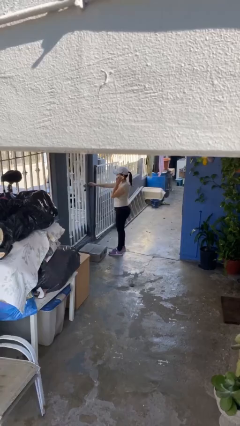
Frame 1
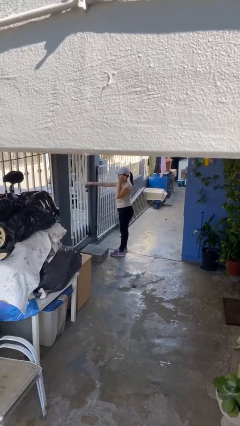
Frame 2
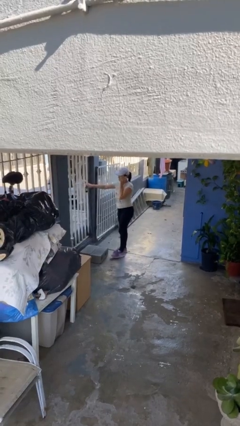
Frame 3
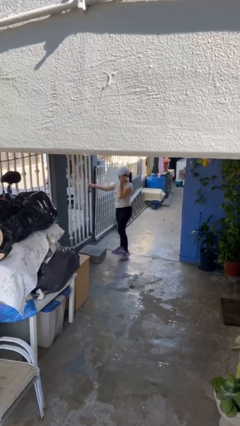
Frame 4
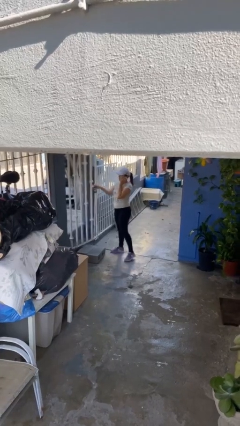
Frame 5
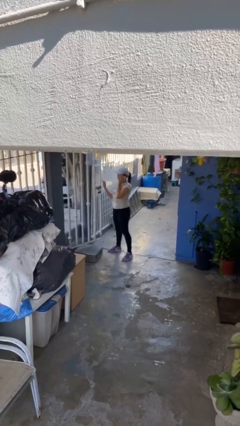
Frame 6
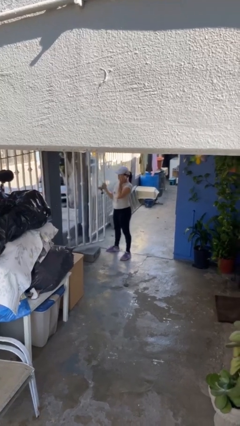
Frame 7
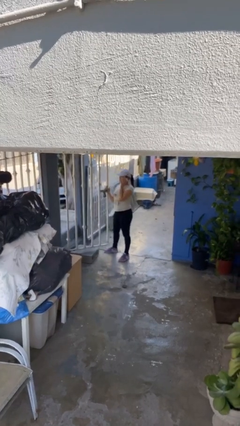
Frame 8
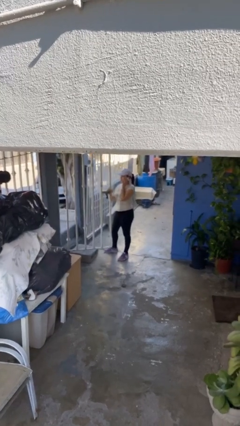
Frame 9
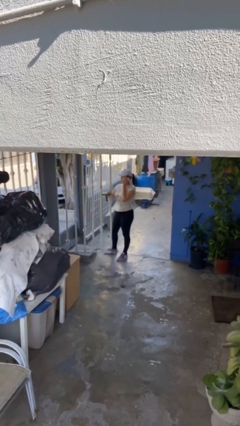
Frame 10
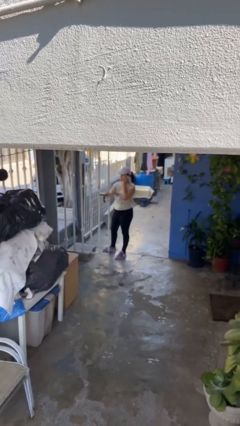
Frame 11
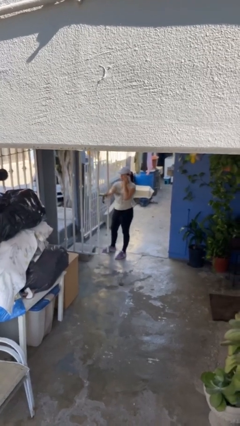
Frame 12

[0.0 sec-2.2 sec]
person opens facility door

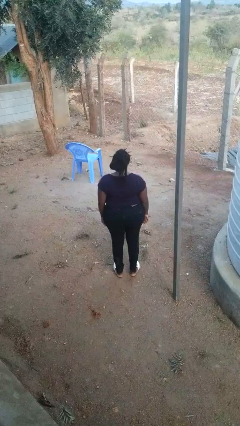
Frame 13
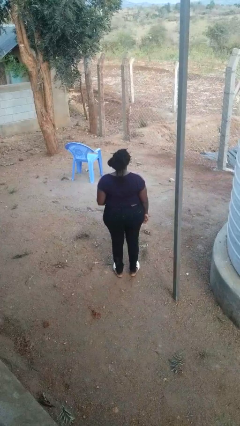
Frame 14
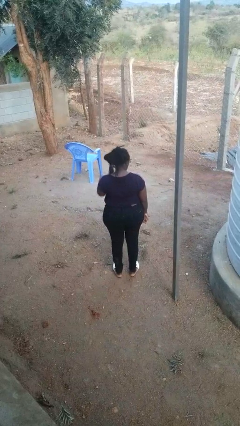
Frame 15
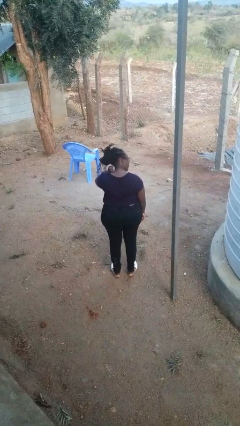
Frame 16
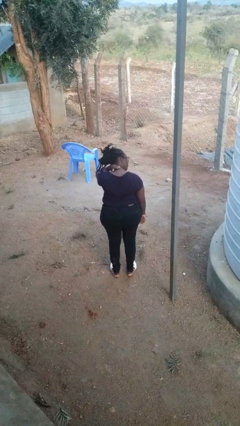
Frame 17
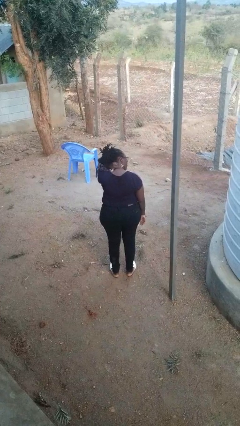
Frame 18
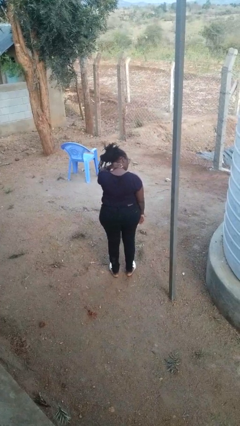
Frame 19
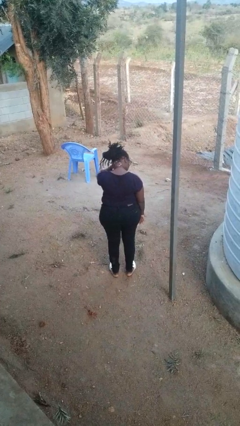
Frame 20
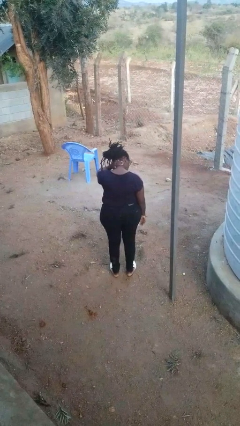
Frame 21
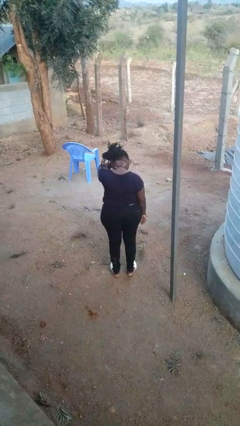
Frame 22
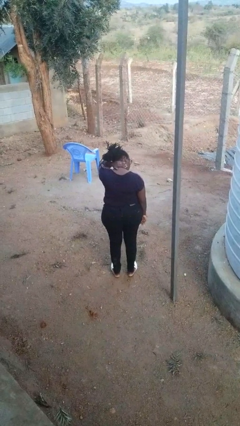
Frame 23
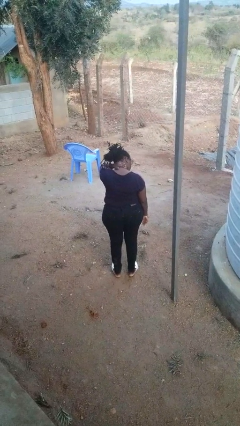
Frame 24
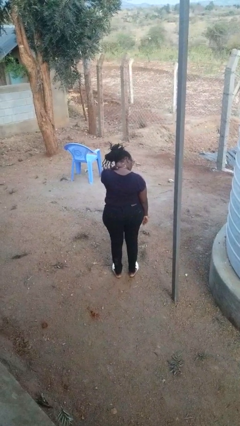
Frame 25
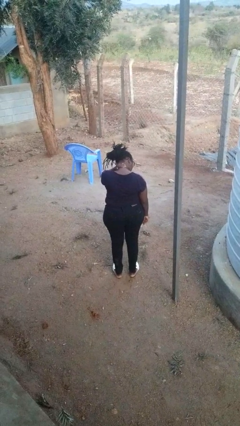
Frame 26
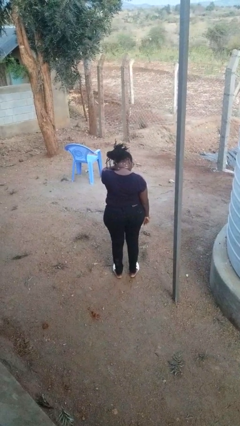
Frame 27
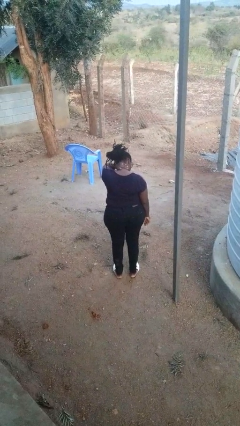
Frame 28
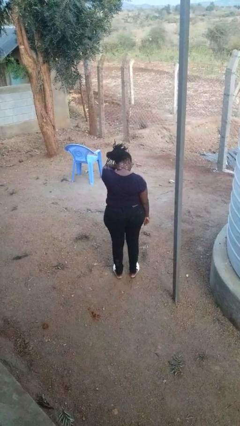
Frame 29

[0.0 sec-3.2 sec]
person rubs neck

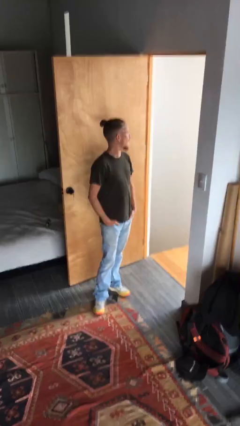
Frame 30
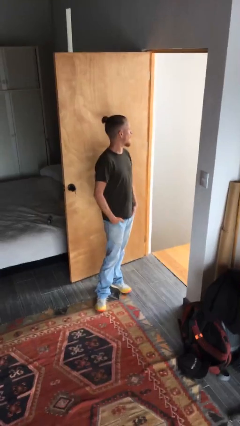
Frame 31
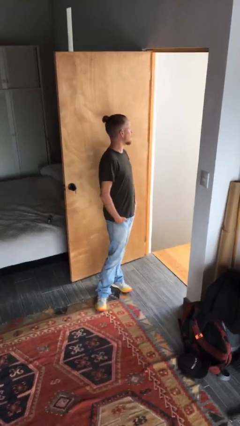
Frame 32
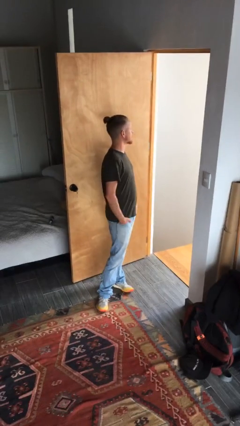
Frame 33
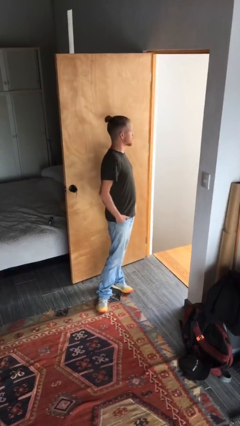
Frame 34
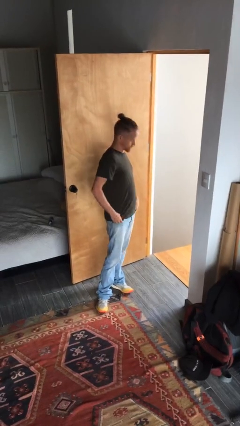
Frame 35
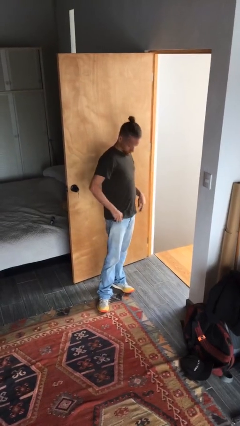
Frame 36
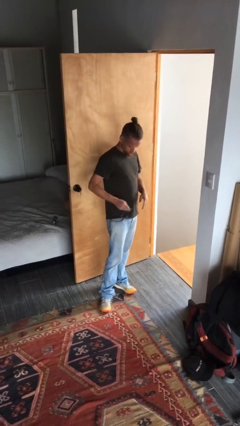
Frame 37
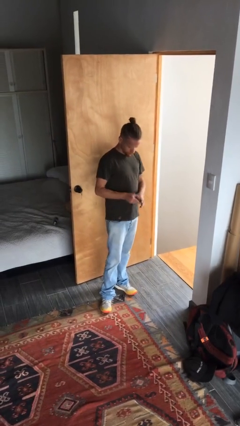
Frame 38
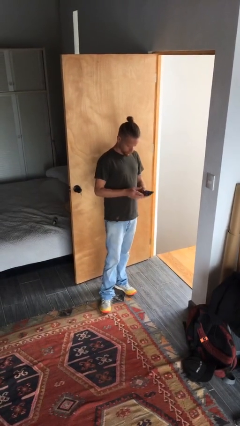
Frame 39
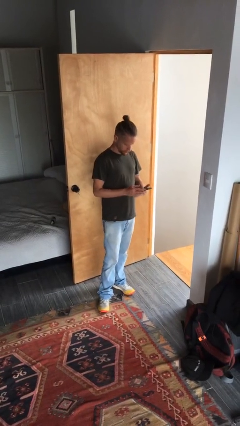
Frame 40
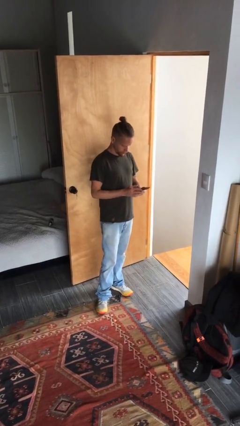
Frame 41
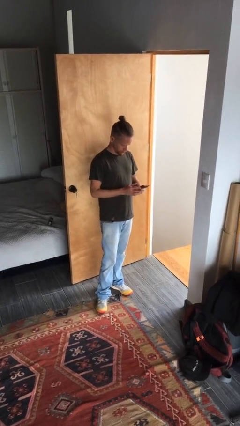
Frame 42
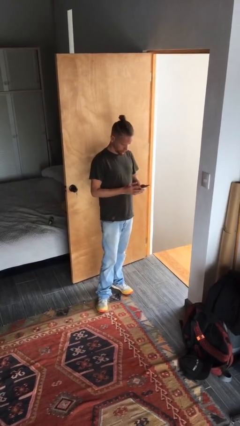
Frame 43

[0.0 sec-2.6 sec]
person takes phone from pocket

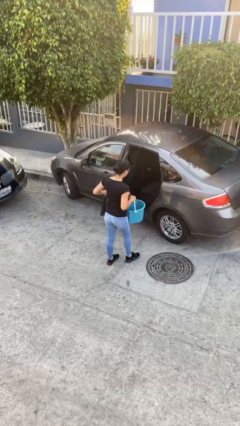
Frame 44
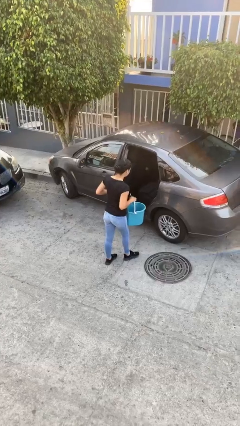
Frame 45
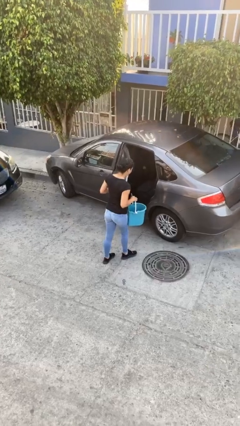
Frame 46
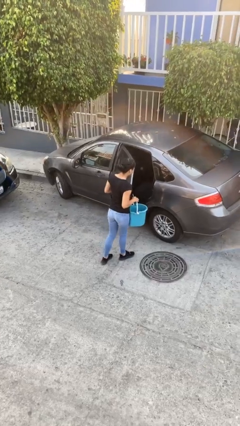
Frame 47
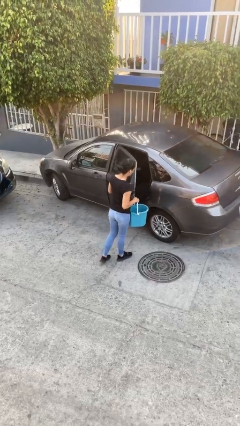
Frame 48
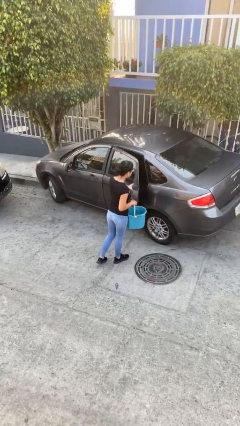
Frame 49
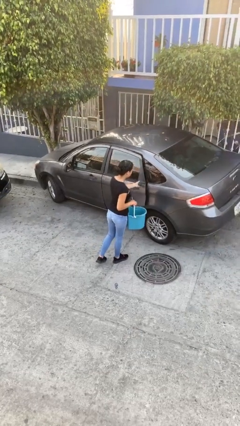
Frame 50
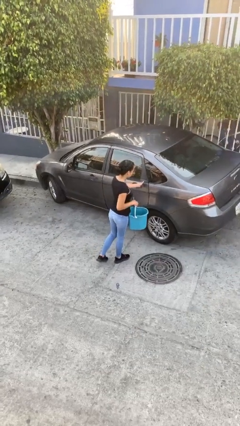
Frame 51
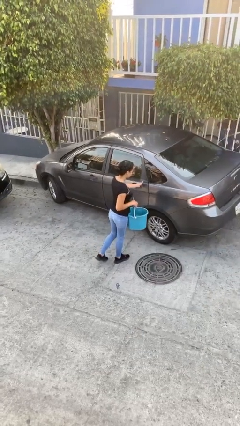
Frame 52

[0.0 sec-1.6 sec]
person closes car door

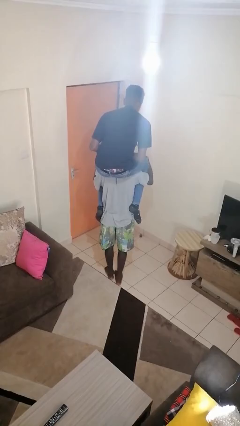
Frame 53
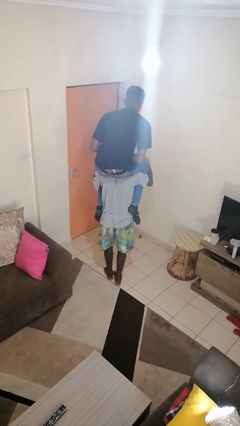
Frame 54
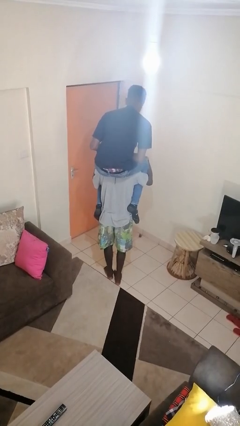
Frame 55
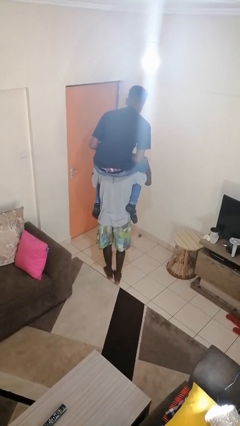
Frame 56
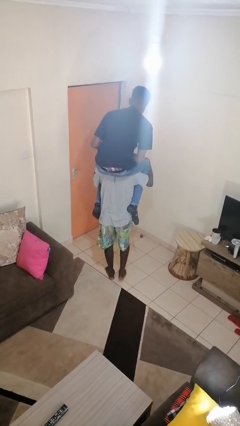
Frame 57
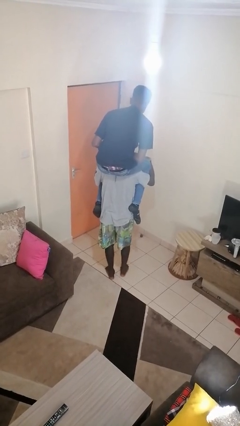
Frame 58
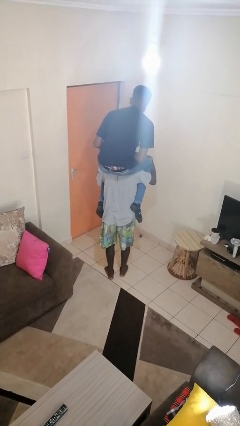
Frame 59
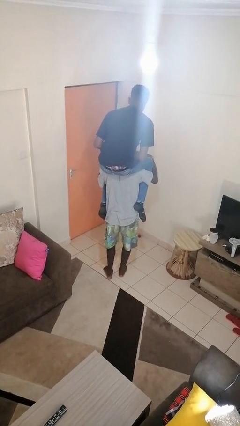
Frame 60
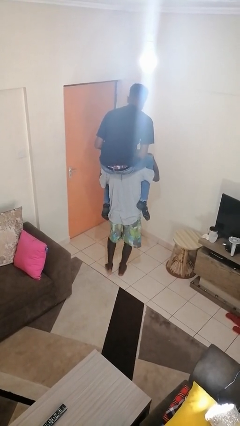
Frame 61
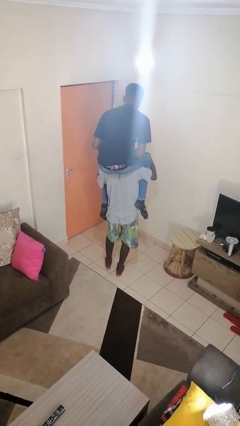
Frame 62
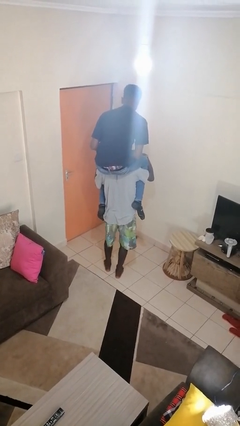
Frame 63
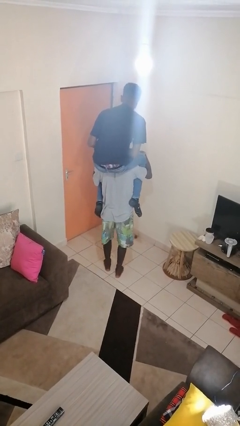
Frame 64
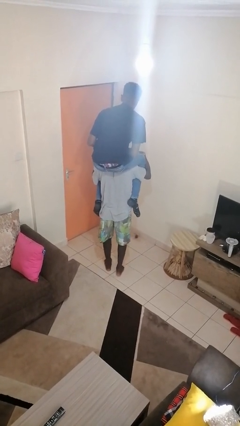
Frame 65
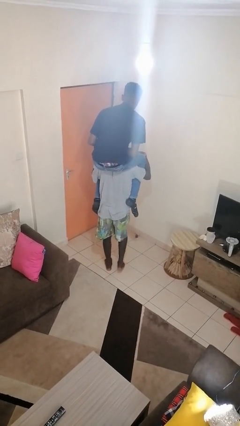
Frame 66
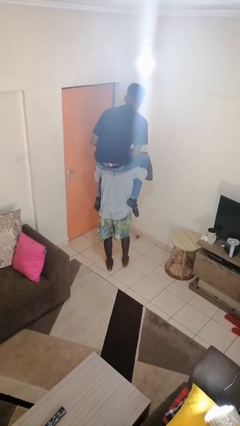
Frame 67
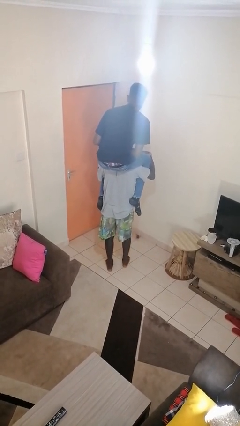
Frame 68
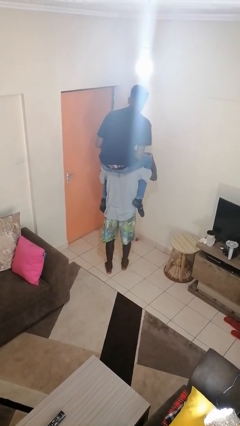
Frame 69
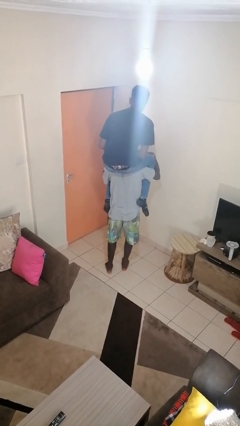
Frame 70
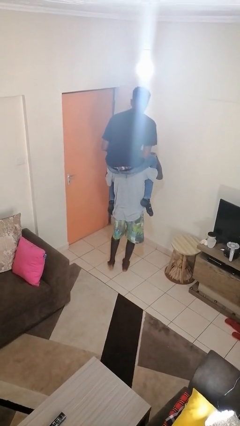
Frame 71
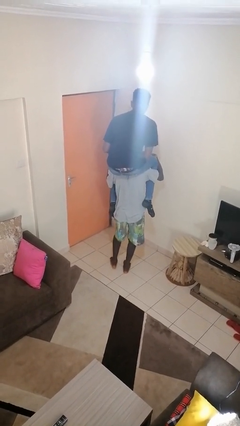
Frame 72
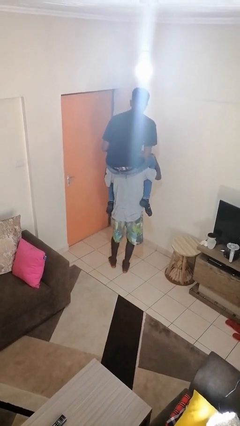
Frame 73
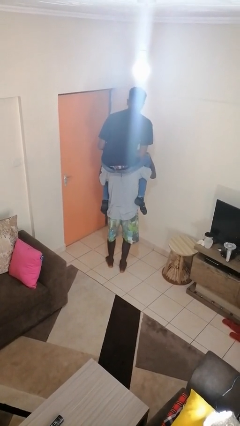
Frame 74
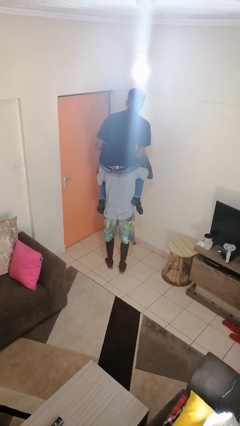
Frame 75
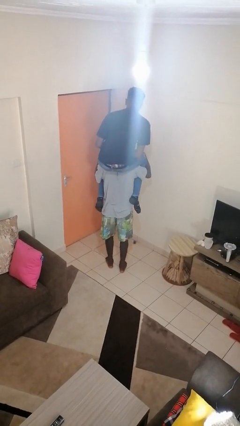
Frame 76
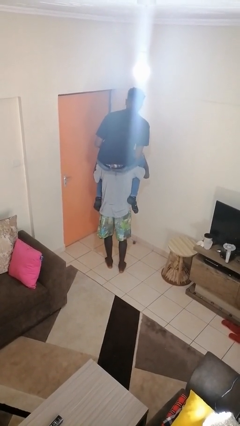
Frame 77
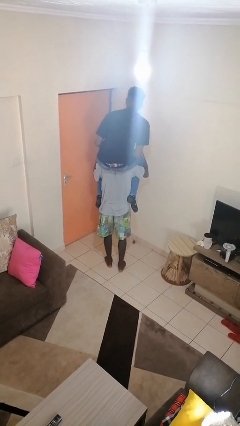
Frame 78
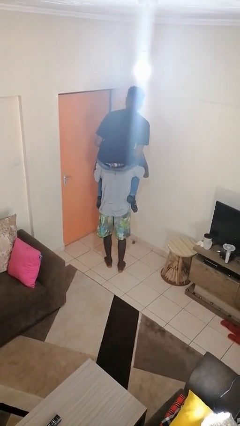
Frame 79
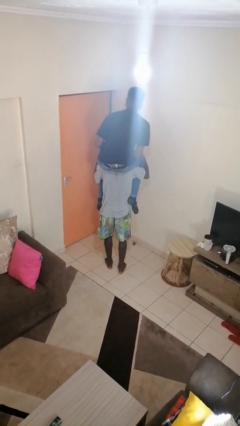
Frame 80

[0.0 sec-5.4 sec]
person carries person on shoulders

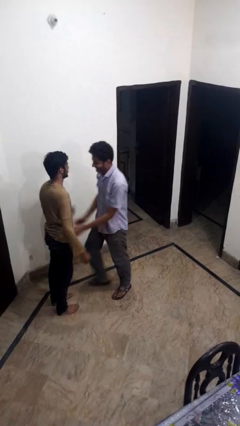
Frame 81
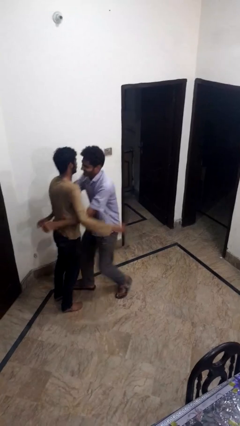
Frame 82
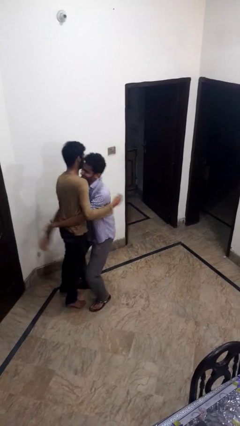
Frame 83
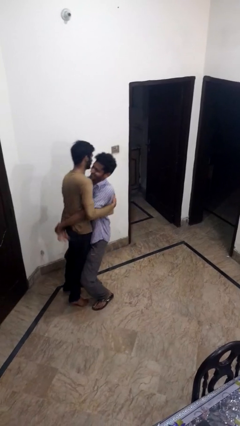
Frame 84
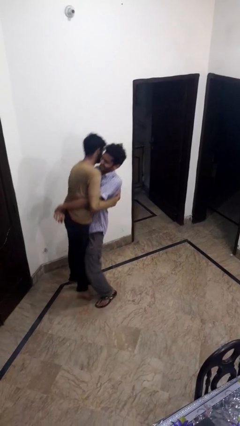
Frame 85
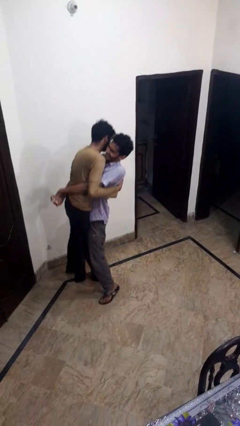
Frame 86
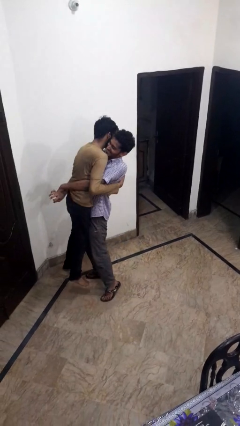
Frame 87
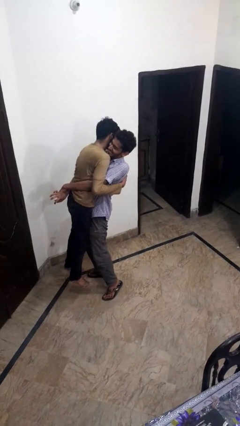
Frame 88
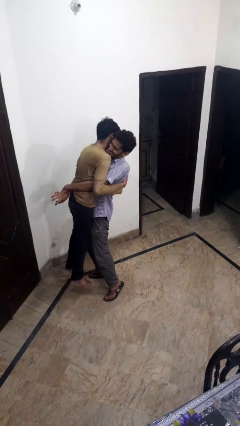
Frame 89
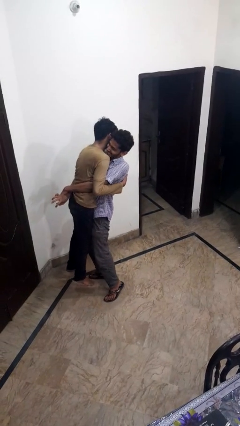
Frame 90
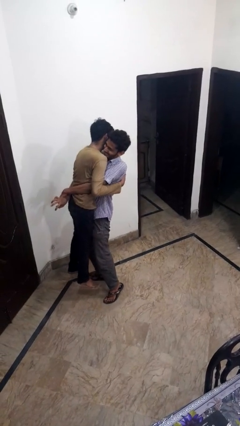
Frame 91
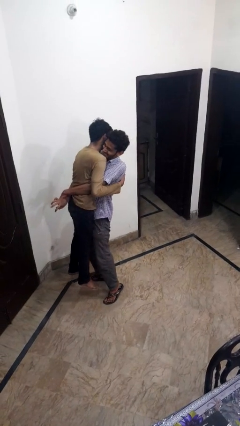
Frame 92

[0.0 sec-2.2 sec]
person picks up person

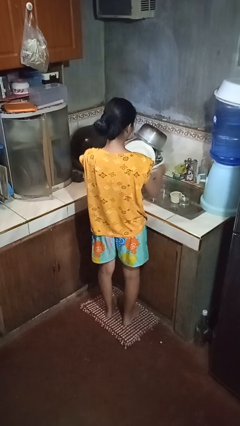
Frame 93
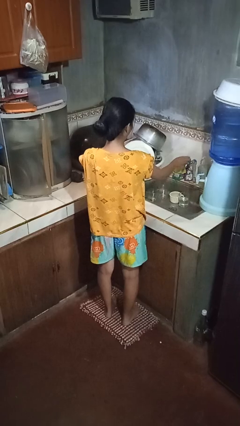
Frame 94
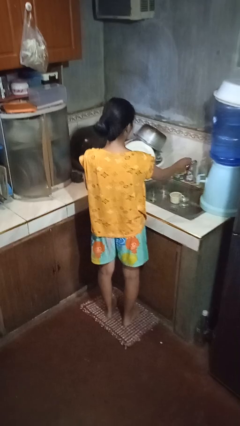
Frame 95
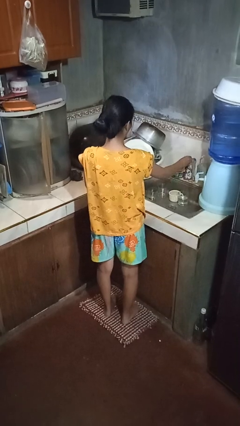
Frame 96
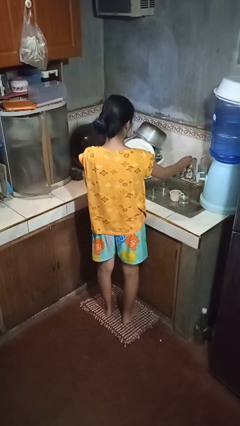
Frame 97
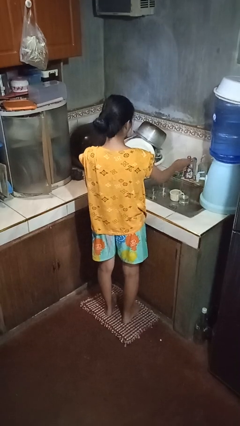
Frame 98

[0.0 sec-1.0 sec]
person turns on faucet
